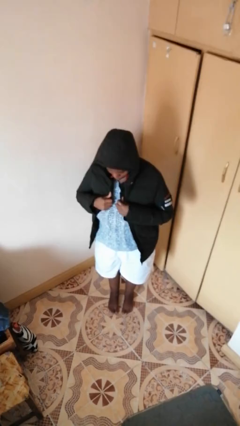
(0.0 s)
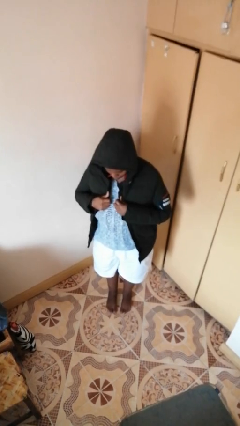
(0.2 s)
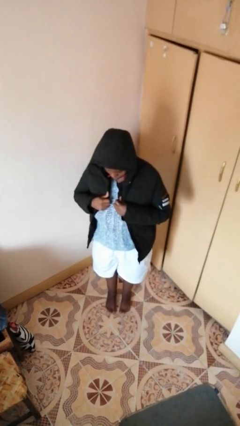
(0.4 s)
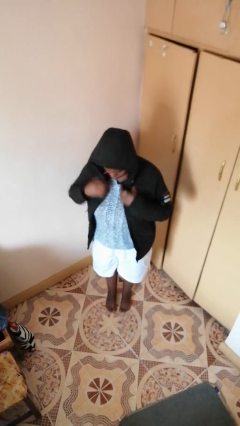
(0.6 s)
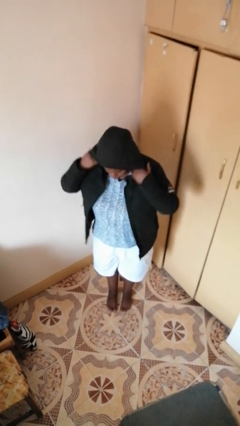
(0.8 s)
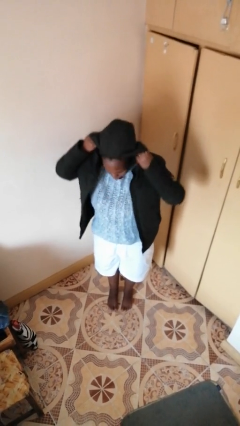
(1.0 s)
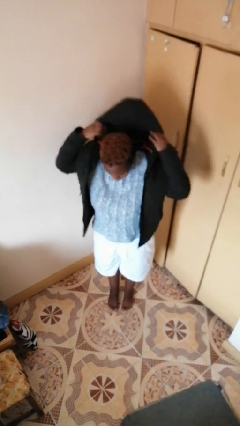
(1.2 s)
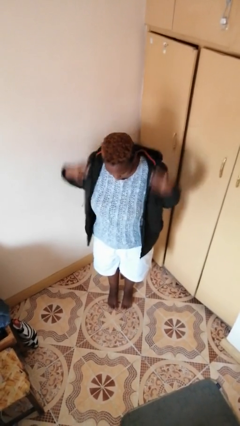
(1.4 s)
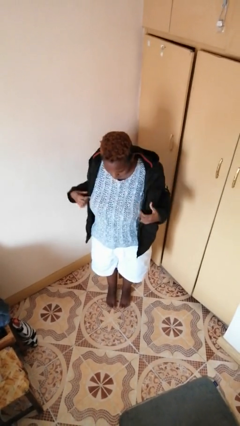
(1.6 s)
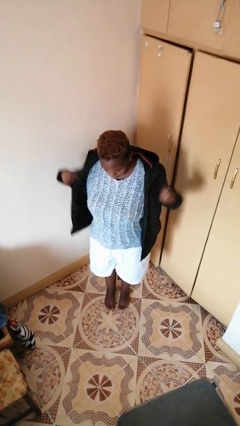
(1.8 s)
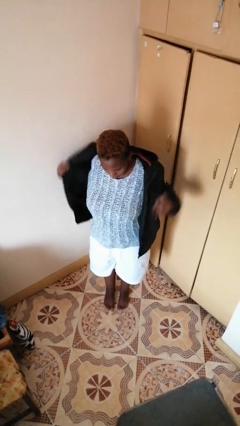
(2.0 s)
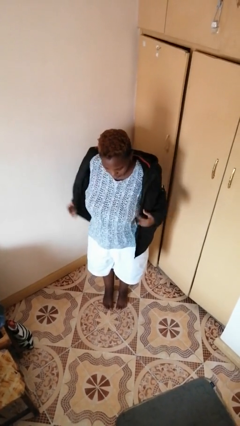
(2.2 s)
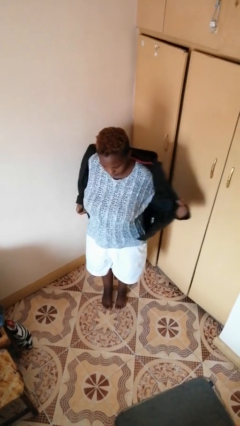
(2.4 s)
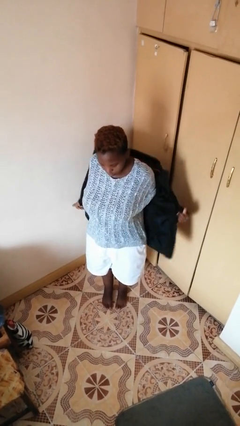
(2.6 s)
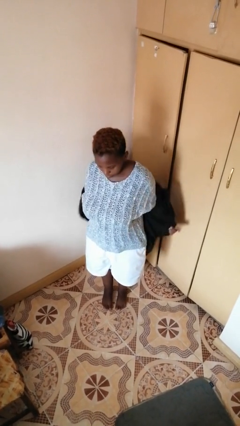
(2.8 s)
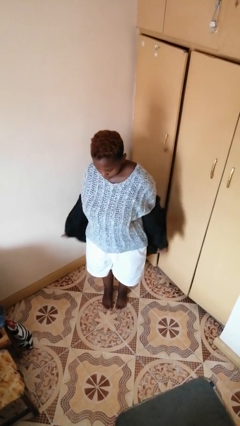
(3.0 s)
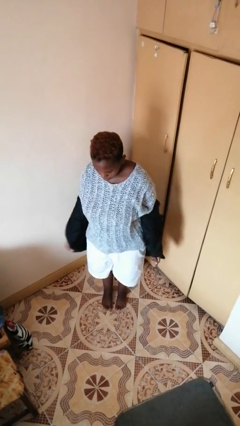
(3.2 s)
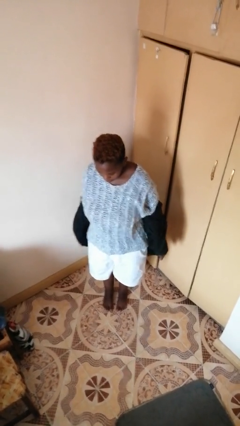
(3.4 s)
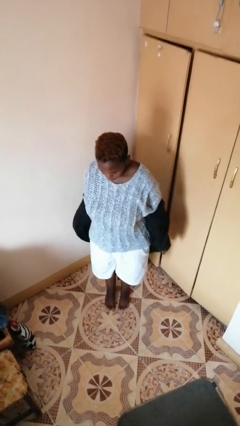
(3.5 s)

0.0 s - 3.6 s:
person takes off hoodie

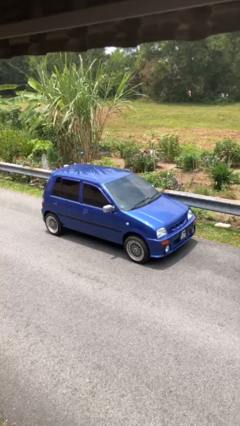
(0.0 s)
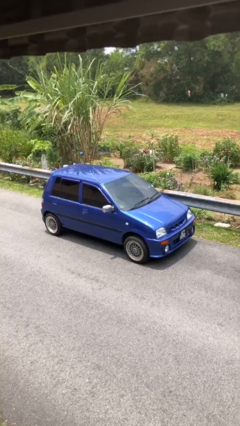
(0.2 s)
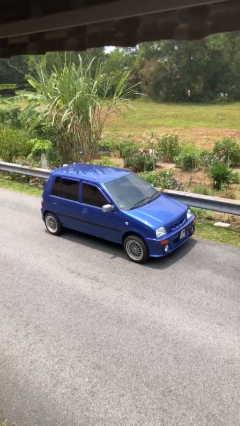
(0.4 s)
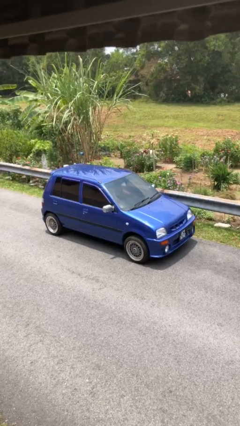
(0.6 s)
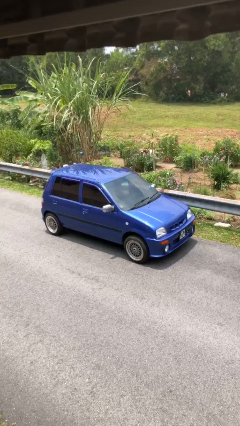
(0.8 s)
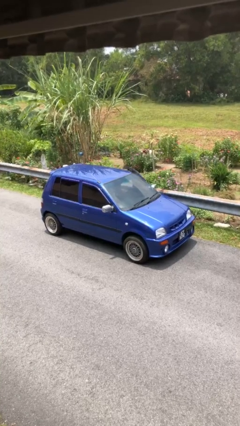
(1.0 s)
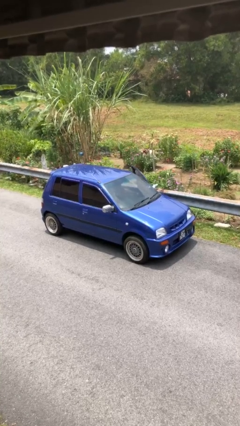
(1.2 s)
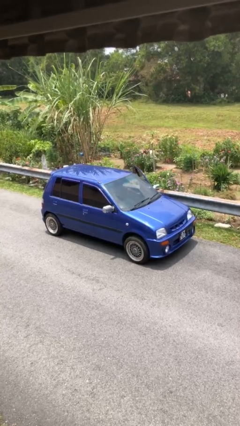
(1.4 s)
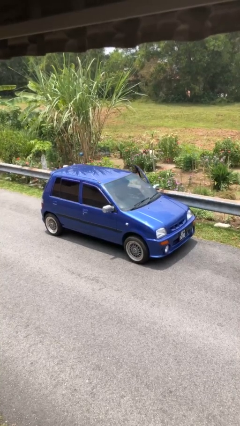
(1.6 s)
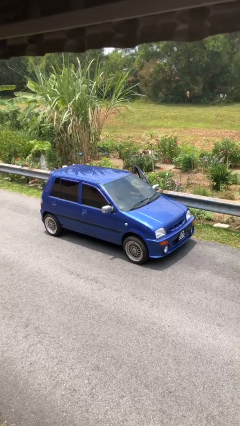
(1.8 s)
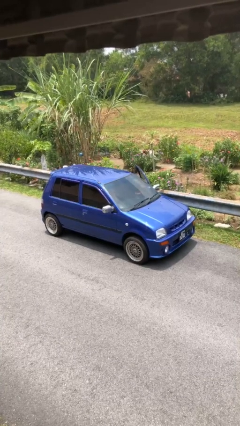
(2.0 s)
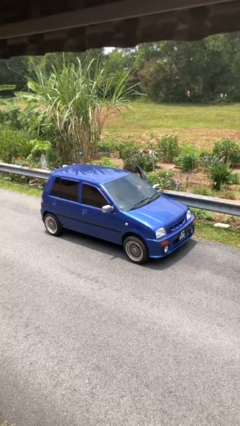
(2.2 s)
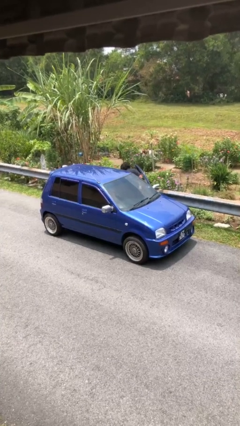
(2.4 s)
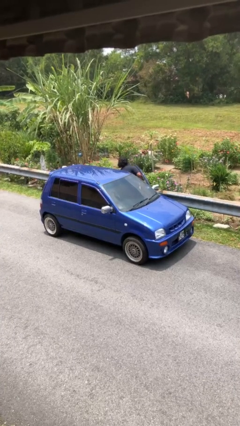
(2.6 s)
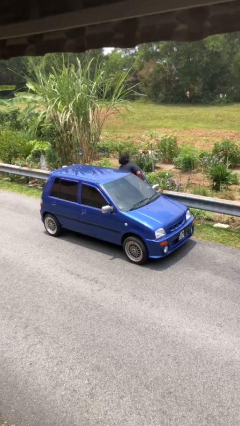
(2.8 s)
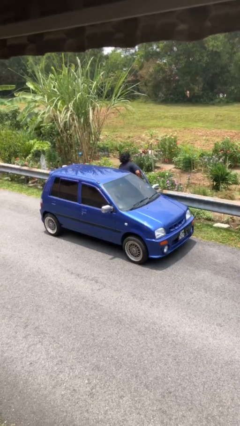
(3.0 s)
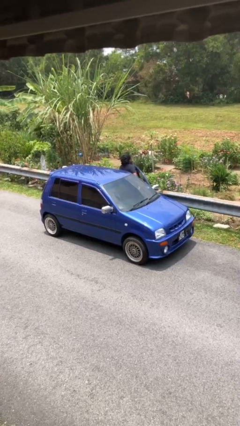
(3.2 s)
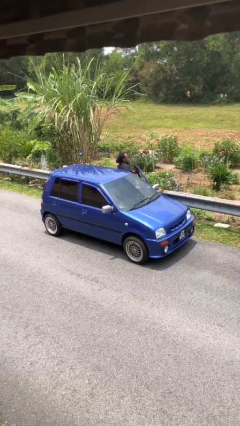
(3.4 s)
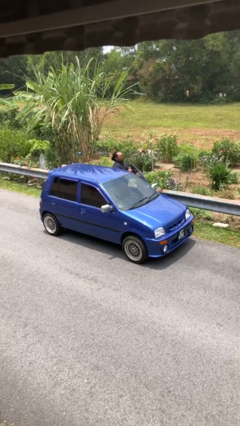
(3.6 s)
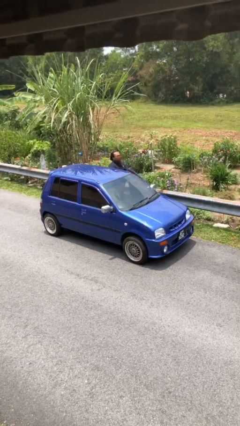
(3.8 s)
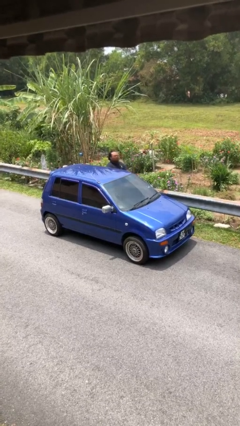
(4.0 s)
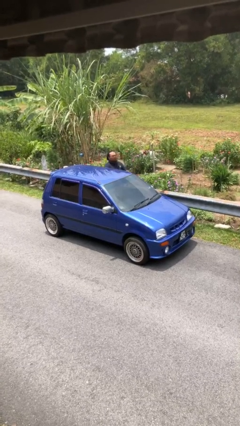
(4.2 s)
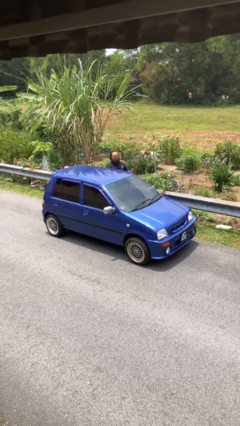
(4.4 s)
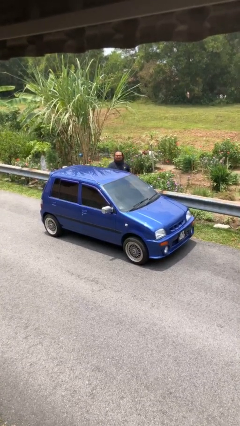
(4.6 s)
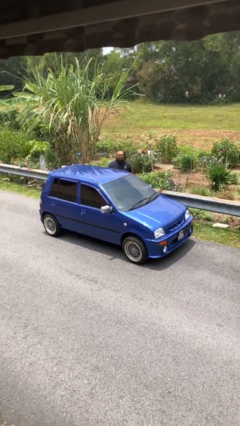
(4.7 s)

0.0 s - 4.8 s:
car drops off person

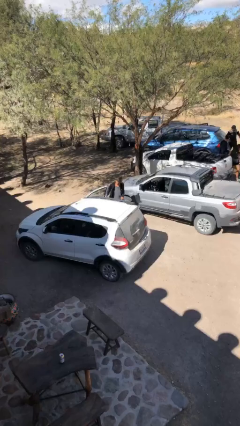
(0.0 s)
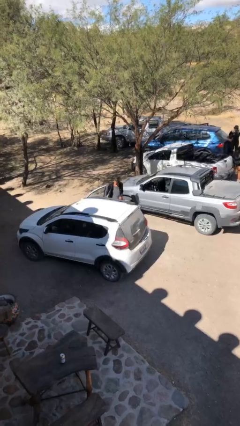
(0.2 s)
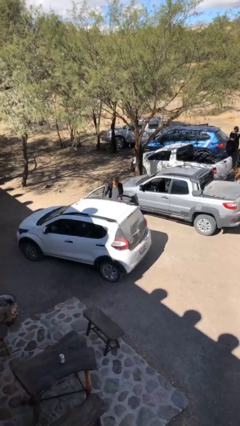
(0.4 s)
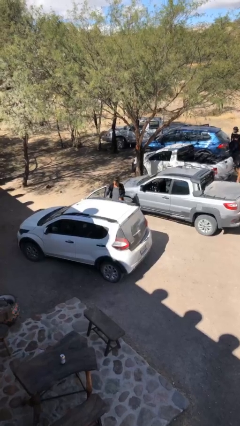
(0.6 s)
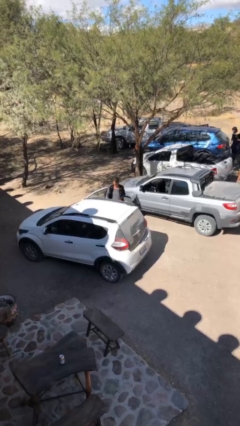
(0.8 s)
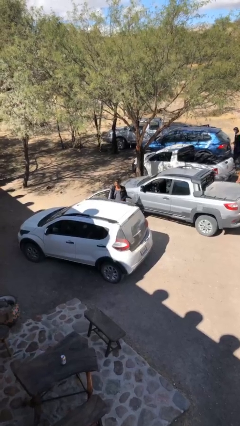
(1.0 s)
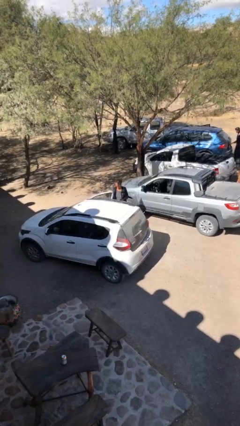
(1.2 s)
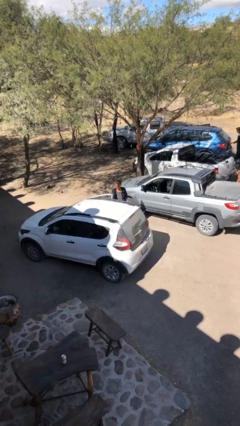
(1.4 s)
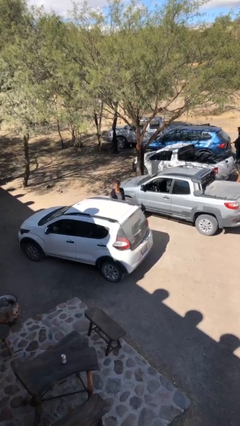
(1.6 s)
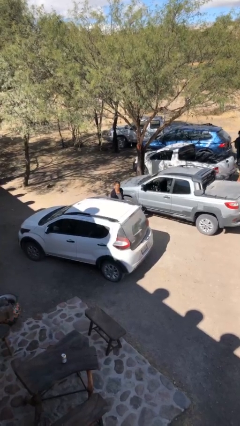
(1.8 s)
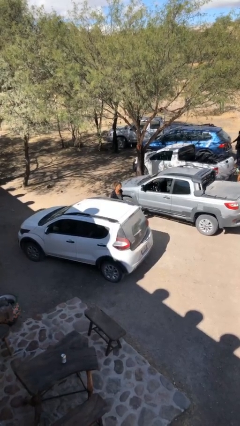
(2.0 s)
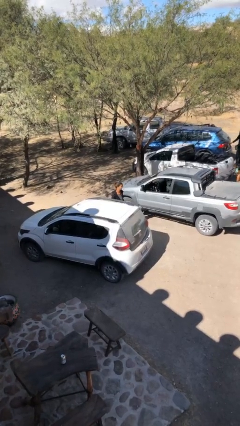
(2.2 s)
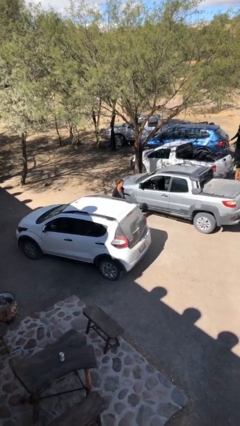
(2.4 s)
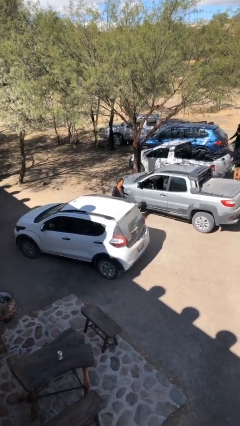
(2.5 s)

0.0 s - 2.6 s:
person closes car door

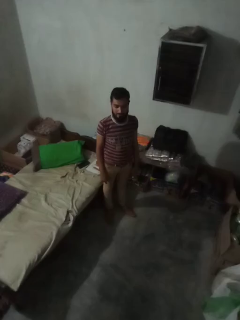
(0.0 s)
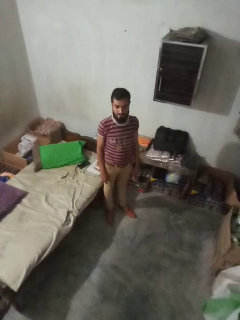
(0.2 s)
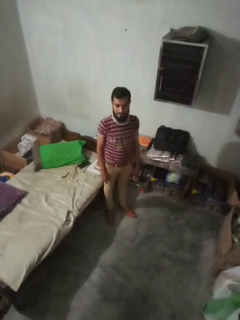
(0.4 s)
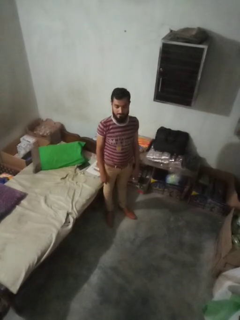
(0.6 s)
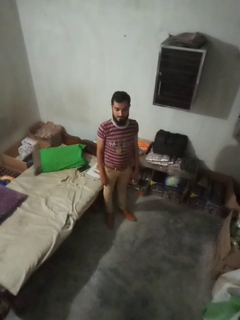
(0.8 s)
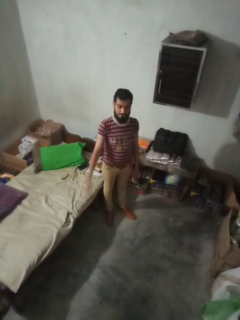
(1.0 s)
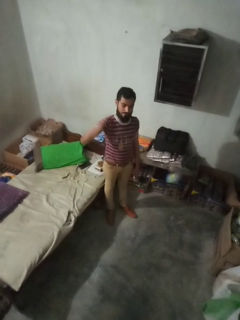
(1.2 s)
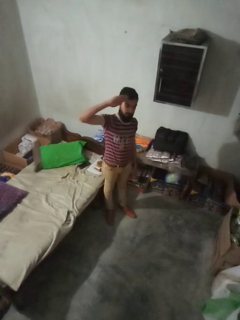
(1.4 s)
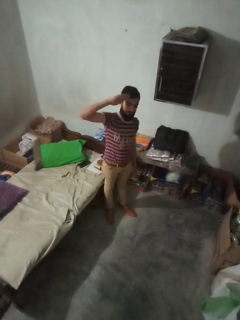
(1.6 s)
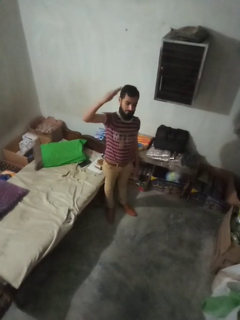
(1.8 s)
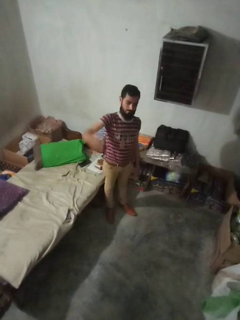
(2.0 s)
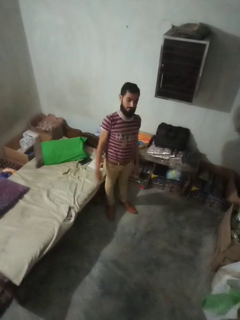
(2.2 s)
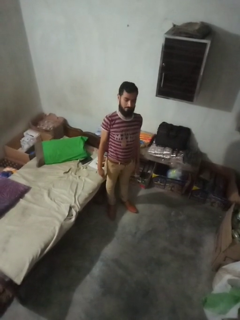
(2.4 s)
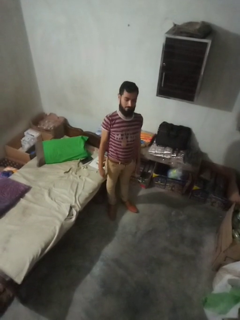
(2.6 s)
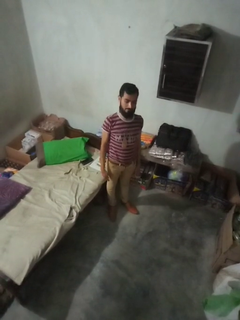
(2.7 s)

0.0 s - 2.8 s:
person salutes

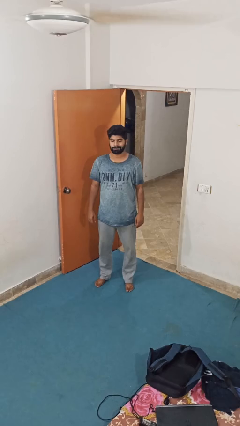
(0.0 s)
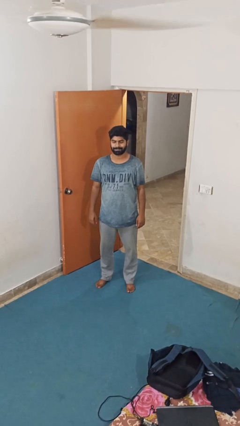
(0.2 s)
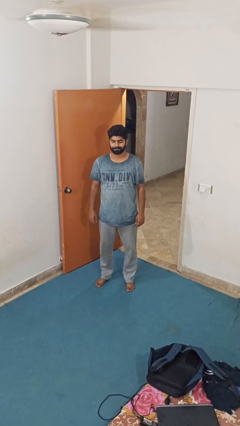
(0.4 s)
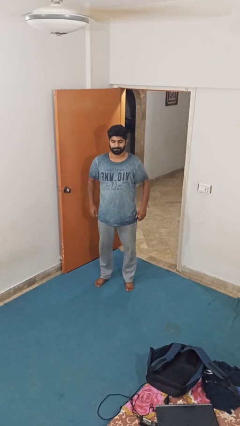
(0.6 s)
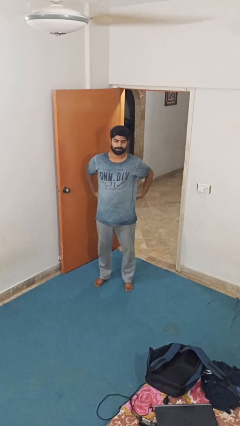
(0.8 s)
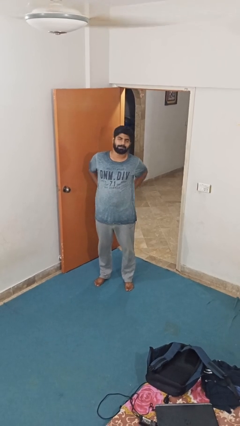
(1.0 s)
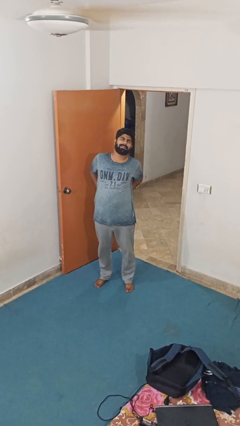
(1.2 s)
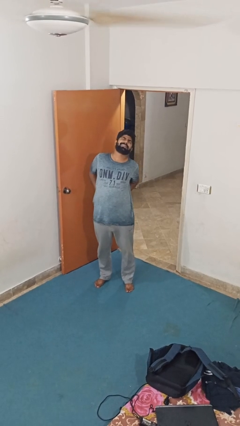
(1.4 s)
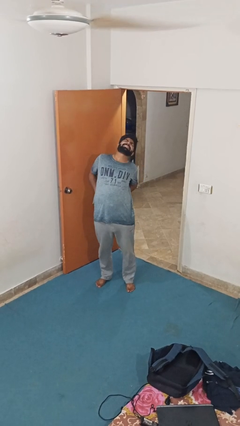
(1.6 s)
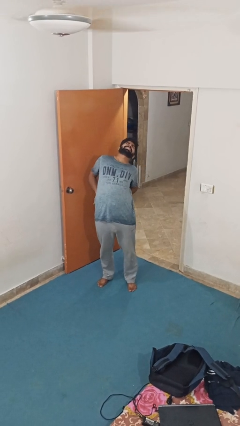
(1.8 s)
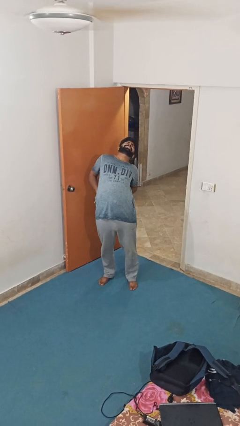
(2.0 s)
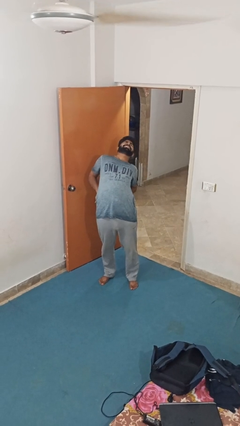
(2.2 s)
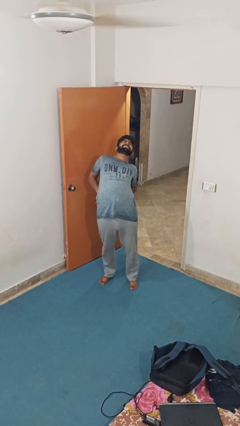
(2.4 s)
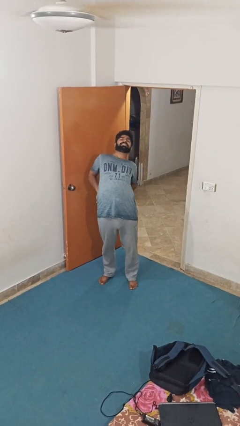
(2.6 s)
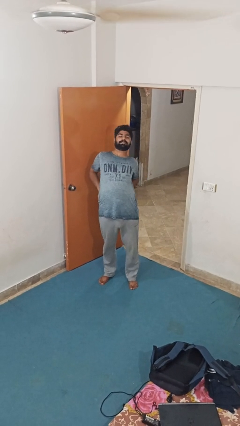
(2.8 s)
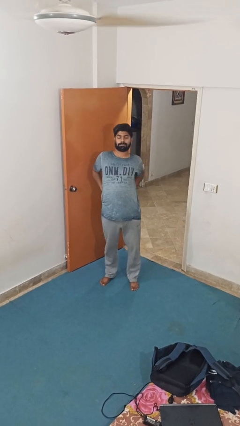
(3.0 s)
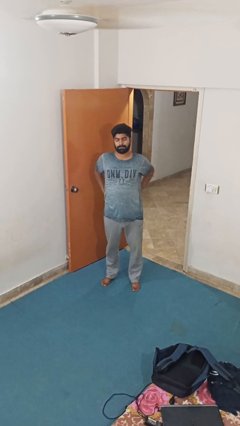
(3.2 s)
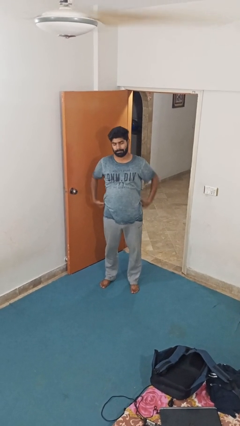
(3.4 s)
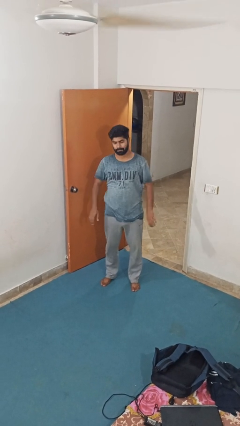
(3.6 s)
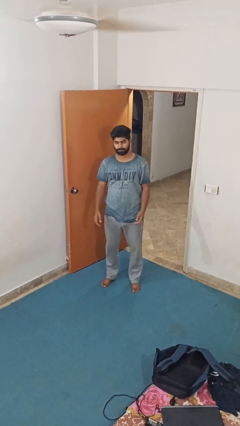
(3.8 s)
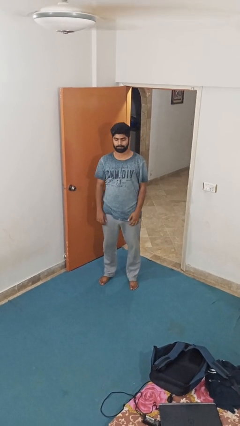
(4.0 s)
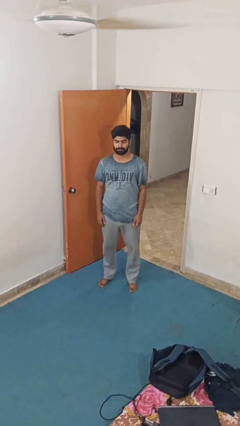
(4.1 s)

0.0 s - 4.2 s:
person stretches back
